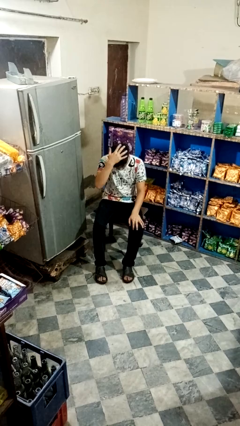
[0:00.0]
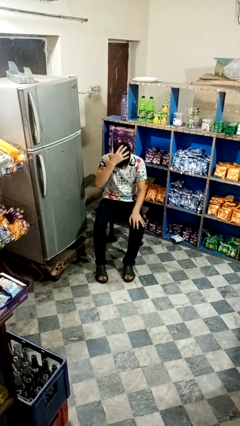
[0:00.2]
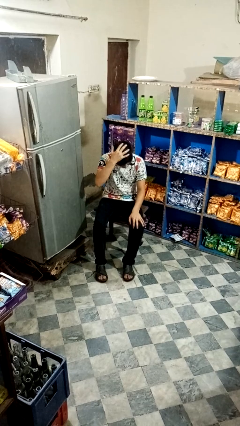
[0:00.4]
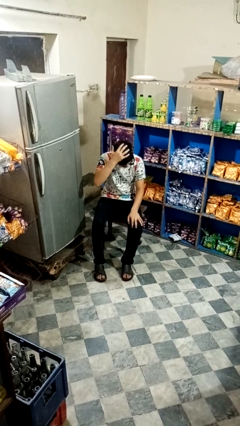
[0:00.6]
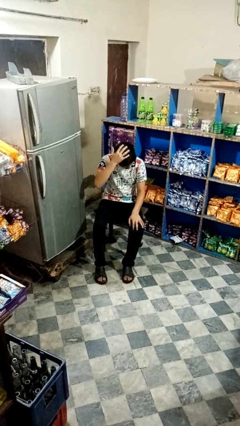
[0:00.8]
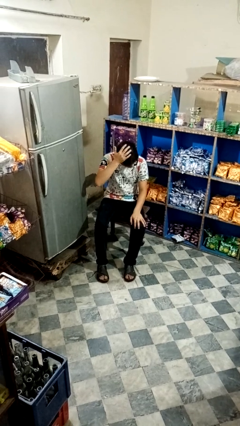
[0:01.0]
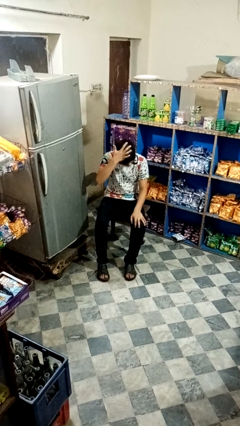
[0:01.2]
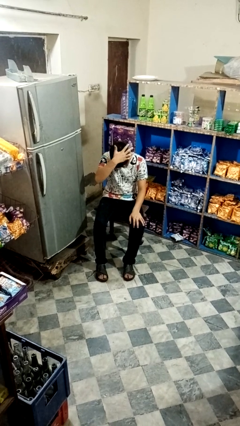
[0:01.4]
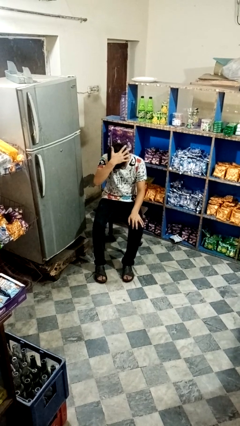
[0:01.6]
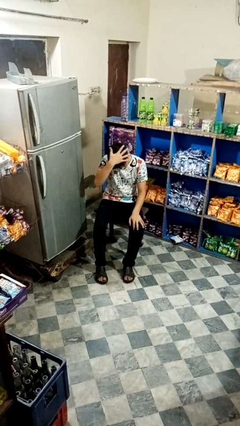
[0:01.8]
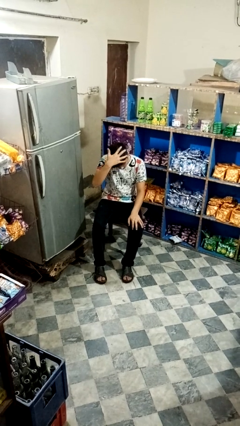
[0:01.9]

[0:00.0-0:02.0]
person pats head

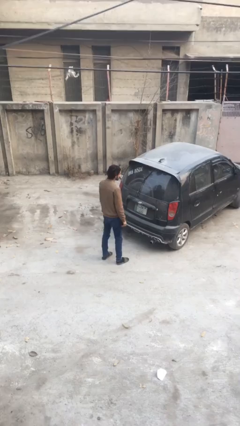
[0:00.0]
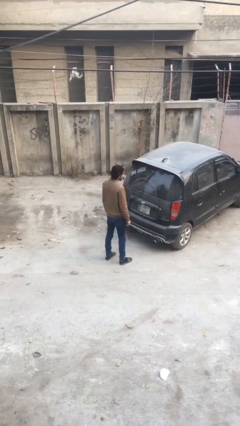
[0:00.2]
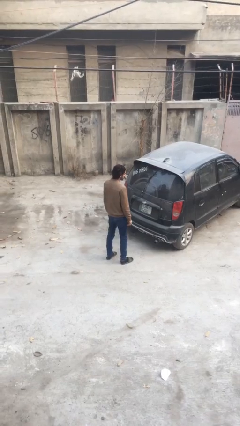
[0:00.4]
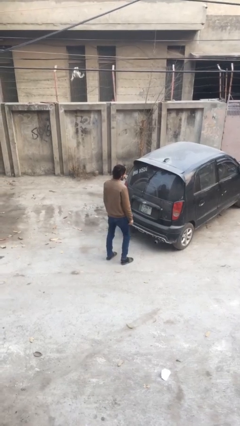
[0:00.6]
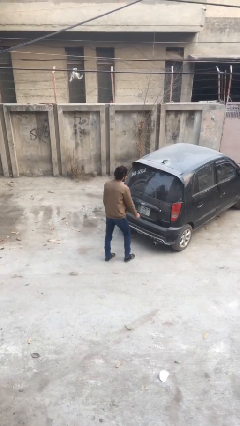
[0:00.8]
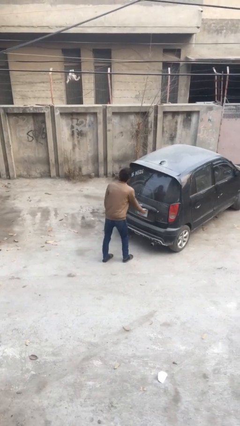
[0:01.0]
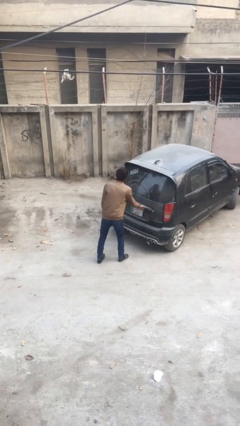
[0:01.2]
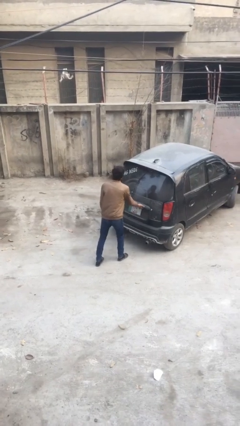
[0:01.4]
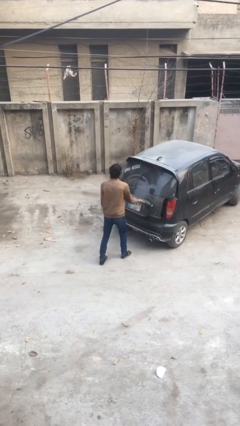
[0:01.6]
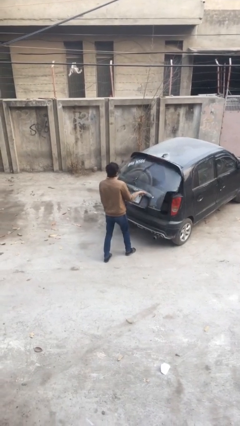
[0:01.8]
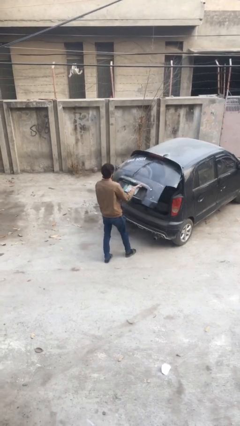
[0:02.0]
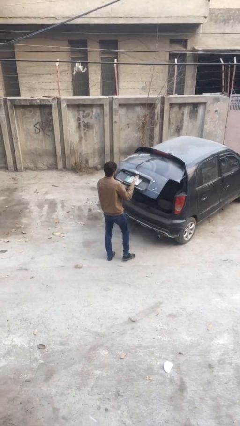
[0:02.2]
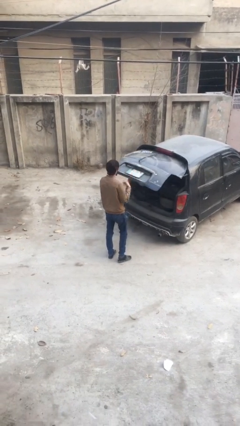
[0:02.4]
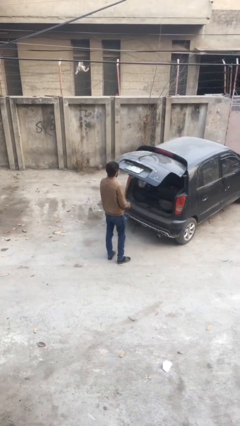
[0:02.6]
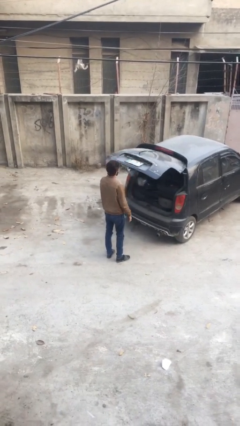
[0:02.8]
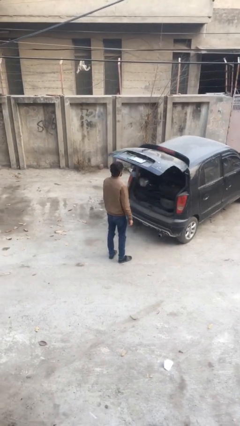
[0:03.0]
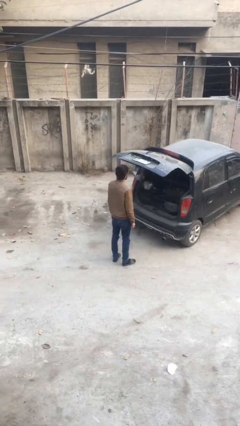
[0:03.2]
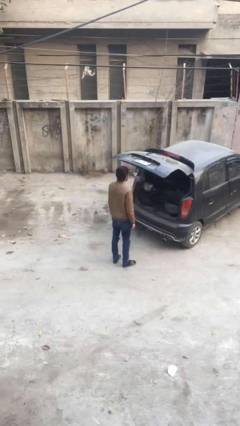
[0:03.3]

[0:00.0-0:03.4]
person opens car trunk

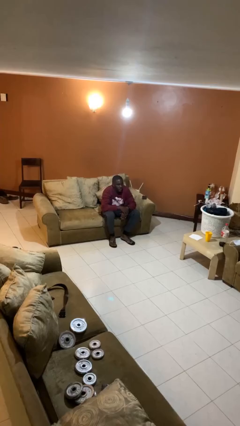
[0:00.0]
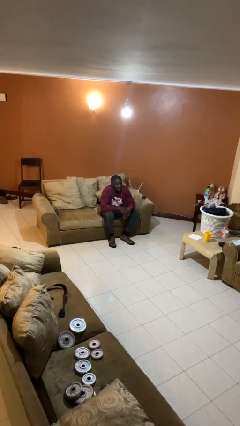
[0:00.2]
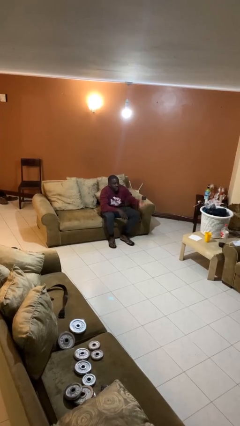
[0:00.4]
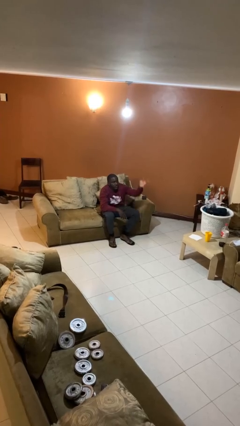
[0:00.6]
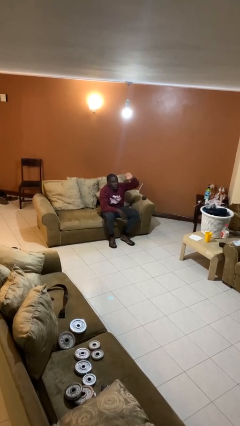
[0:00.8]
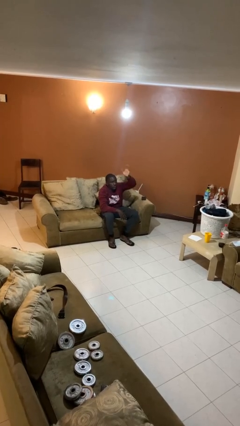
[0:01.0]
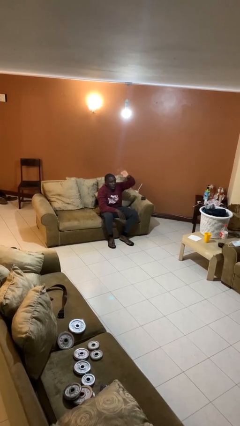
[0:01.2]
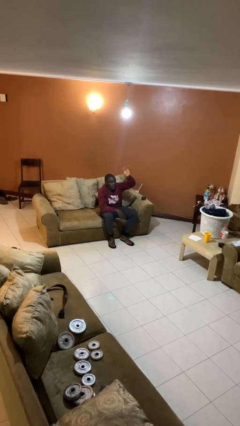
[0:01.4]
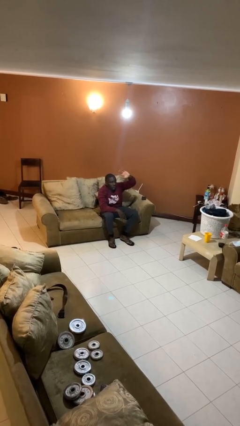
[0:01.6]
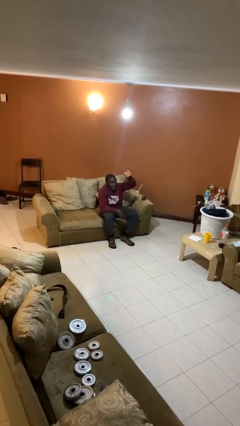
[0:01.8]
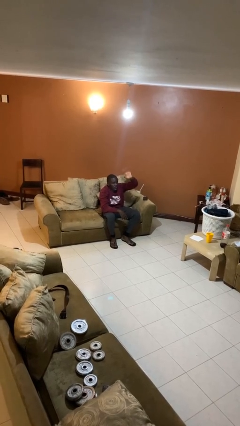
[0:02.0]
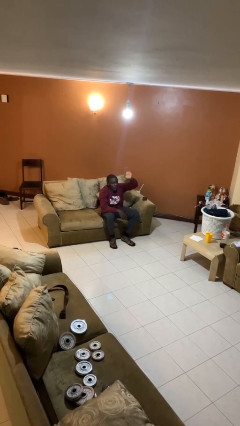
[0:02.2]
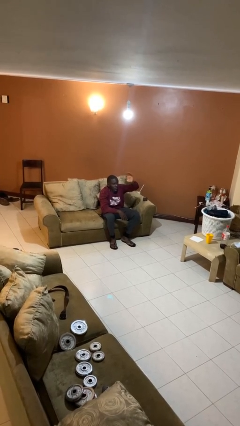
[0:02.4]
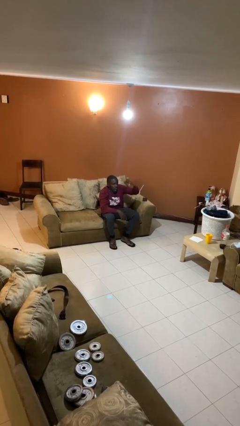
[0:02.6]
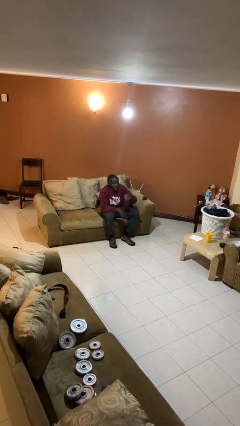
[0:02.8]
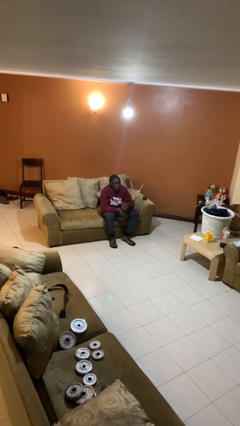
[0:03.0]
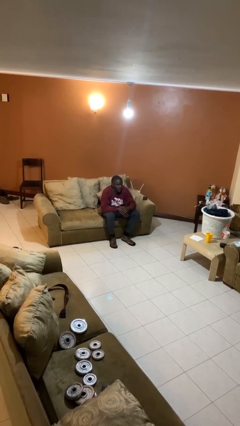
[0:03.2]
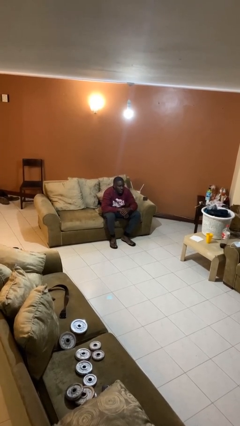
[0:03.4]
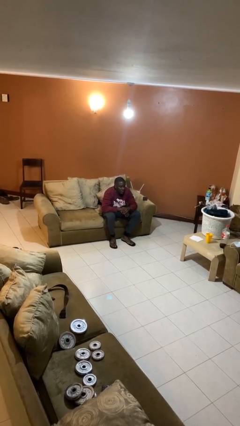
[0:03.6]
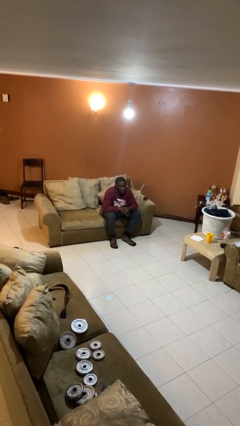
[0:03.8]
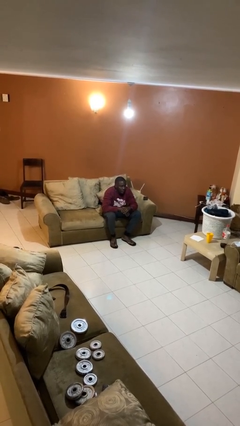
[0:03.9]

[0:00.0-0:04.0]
person waves at person

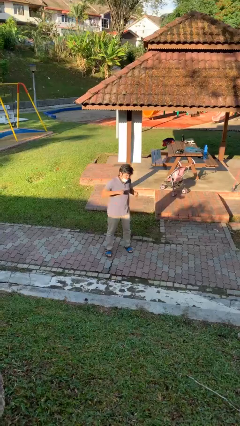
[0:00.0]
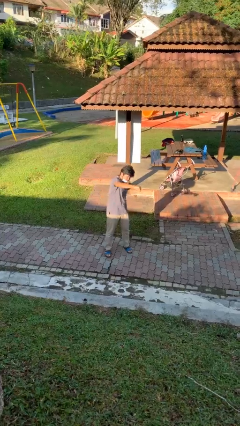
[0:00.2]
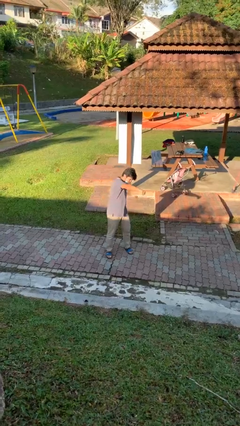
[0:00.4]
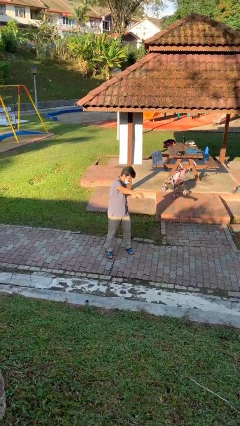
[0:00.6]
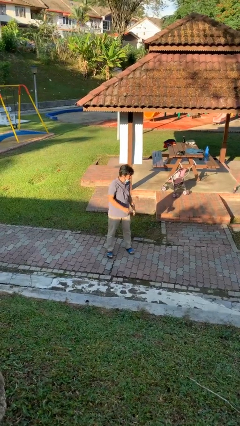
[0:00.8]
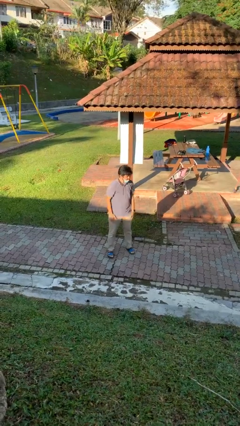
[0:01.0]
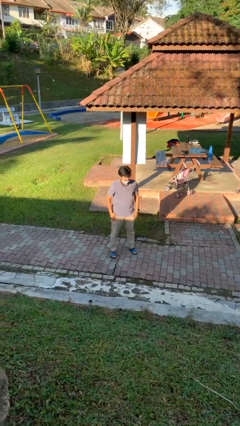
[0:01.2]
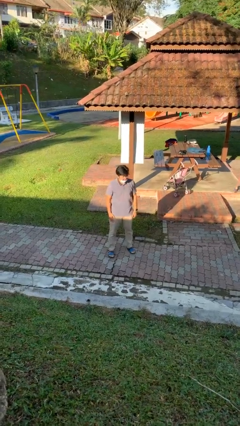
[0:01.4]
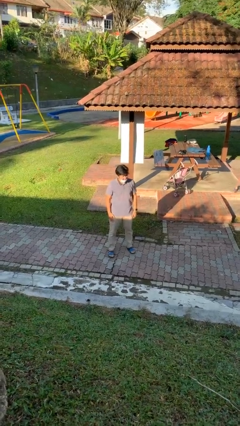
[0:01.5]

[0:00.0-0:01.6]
person punches

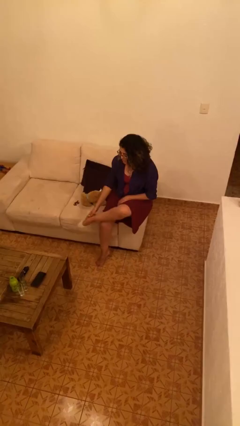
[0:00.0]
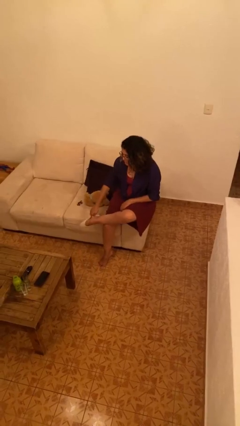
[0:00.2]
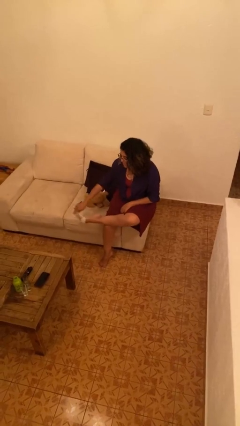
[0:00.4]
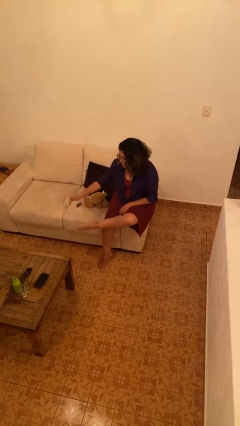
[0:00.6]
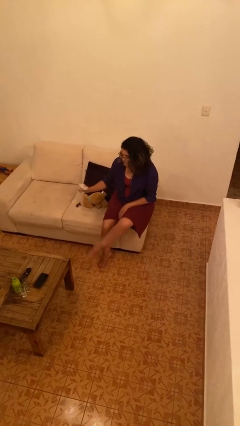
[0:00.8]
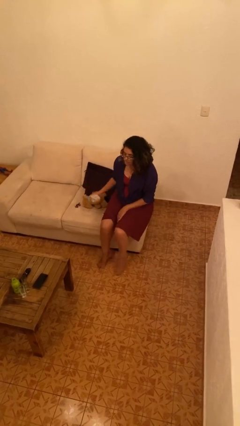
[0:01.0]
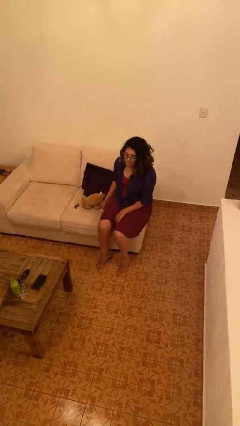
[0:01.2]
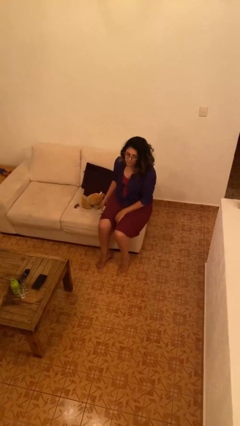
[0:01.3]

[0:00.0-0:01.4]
person takes off socks

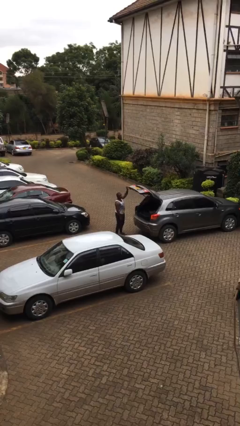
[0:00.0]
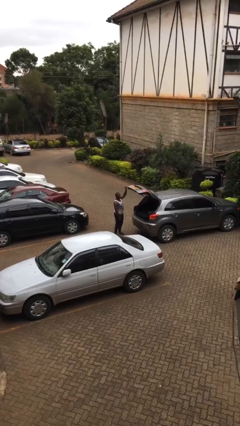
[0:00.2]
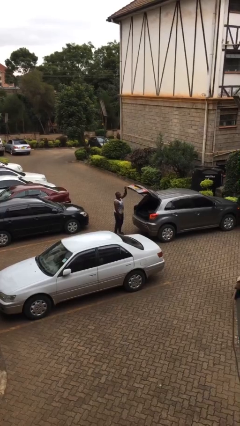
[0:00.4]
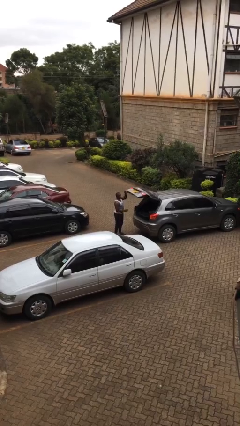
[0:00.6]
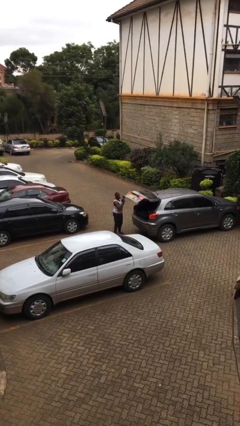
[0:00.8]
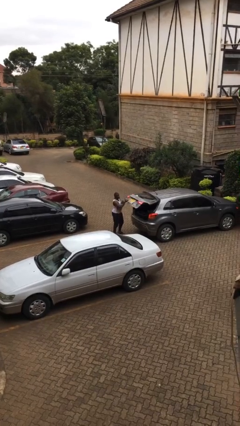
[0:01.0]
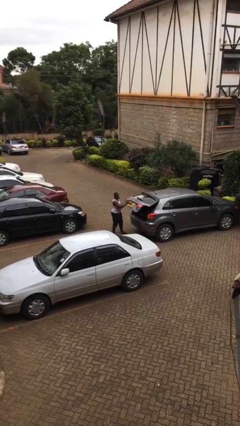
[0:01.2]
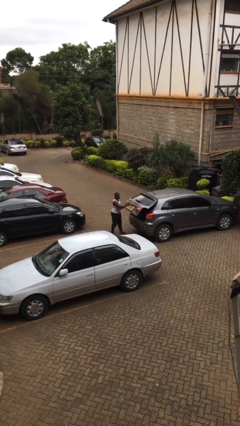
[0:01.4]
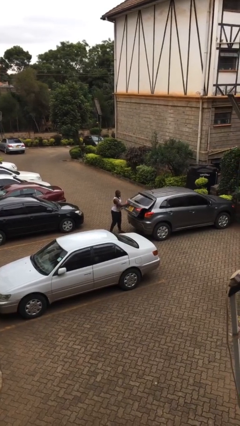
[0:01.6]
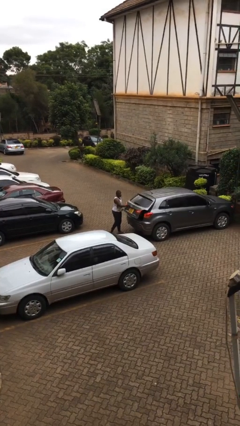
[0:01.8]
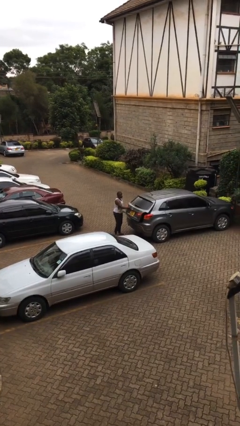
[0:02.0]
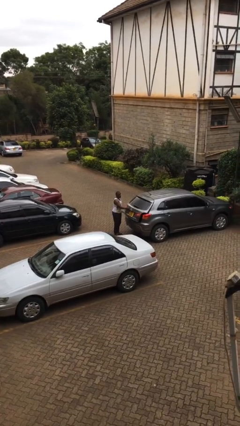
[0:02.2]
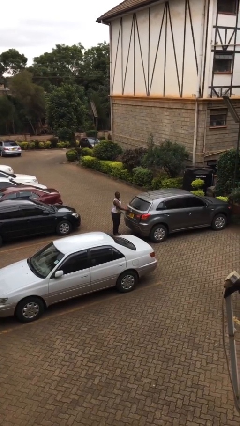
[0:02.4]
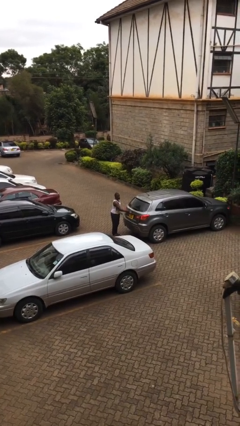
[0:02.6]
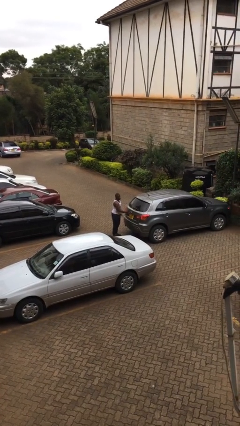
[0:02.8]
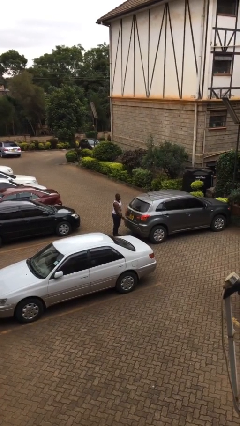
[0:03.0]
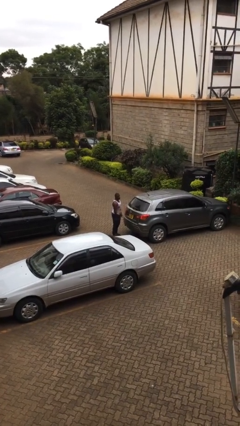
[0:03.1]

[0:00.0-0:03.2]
person closes car trunk

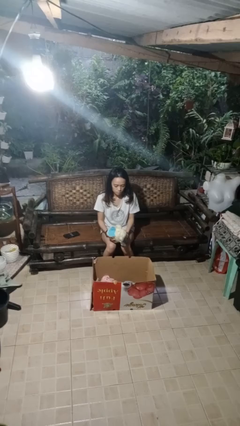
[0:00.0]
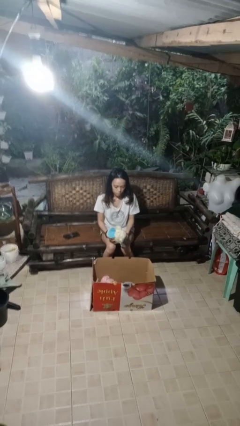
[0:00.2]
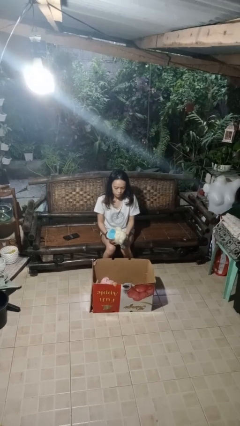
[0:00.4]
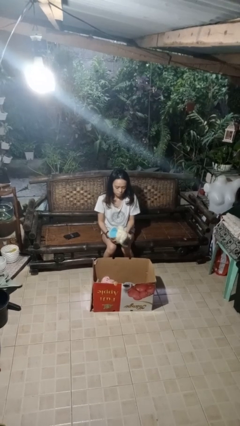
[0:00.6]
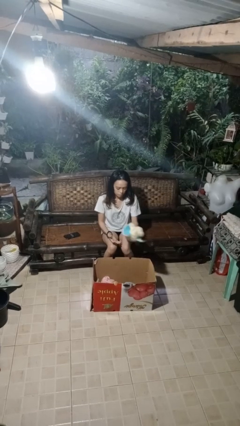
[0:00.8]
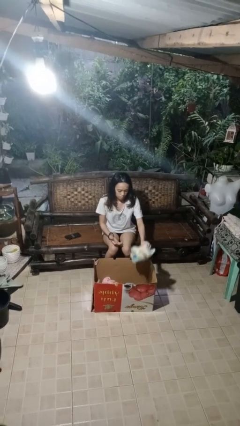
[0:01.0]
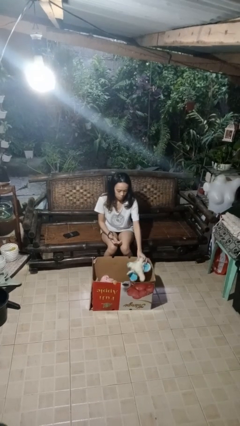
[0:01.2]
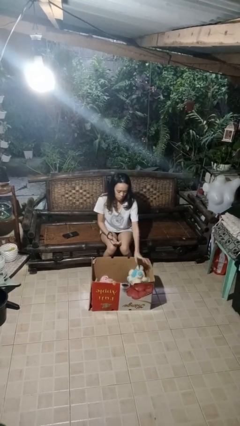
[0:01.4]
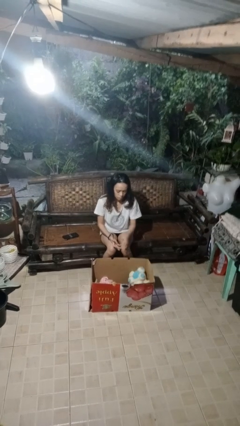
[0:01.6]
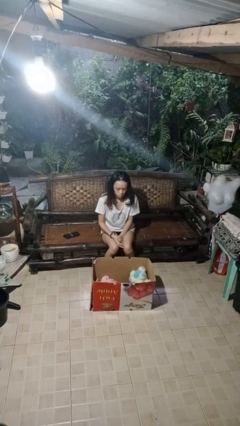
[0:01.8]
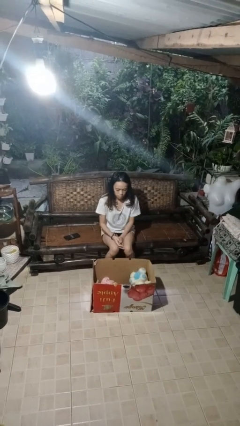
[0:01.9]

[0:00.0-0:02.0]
person puts object into box
